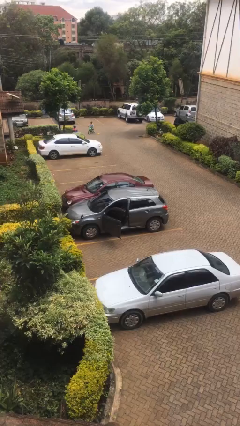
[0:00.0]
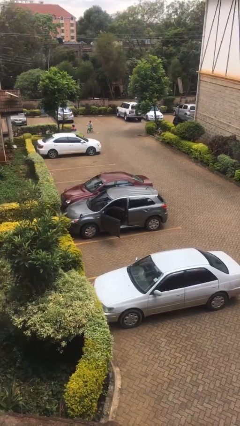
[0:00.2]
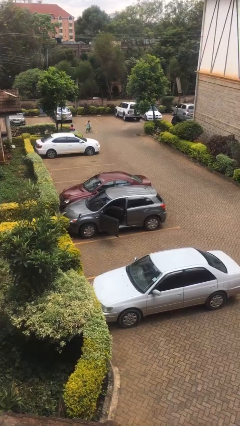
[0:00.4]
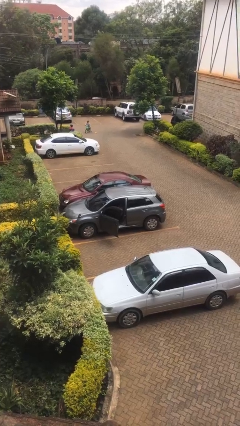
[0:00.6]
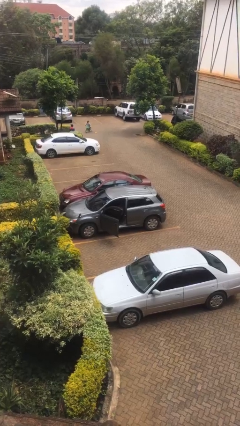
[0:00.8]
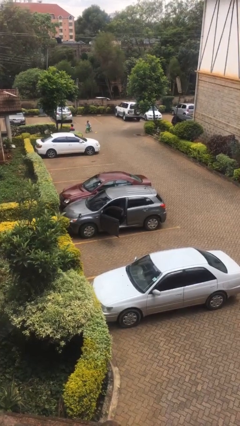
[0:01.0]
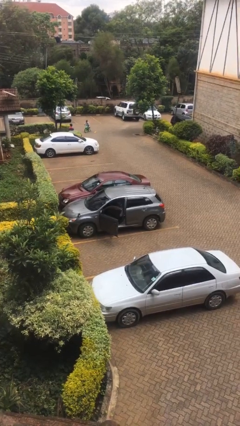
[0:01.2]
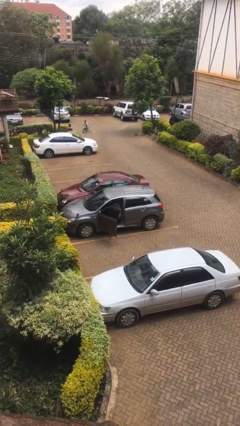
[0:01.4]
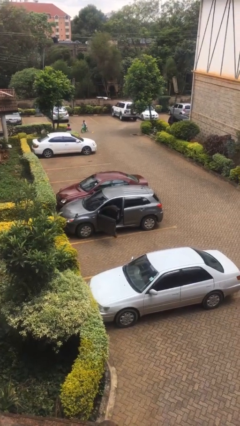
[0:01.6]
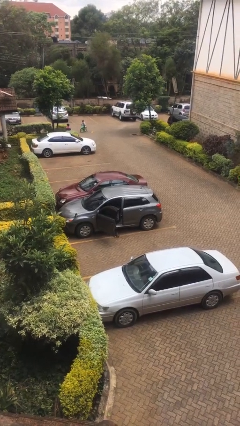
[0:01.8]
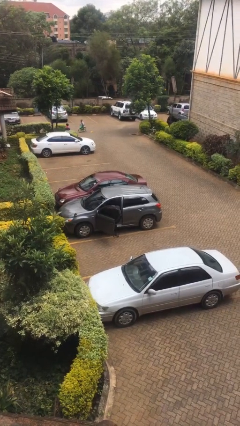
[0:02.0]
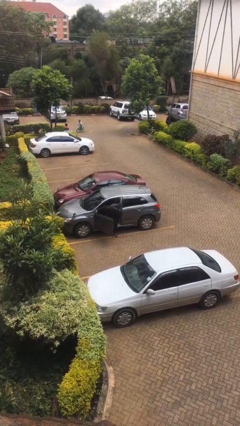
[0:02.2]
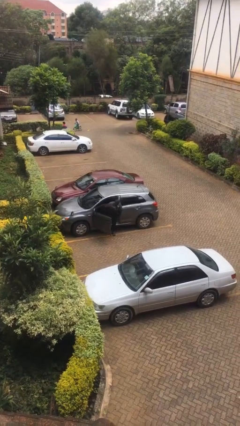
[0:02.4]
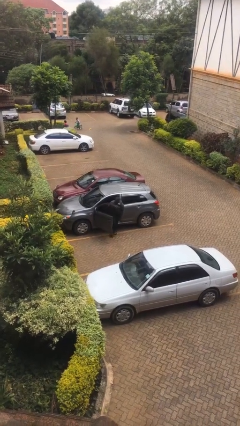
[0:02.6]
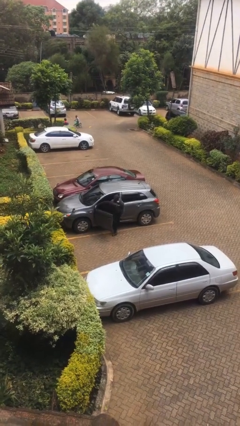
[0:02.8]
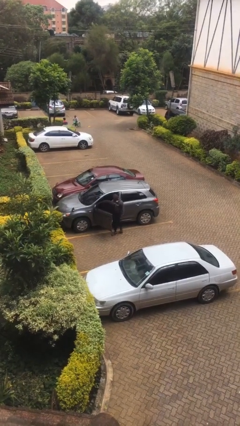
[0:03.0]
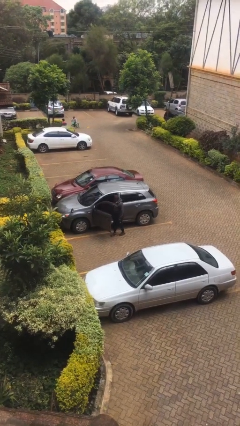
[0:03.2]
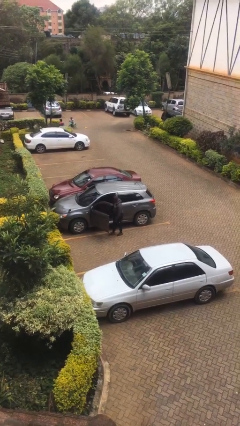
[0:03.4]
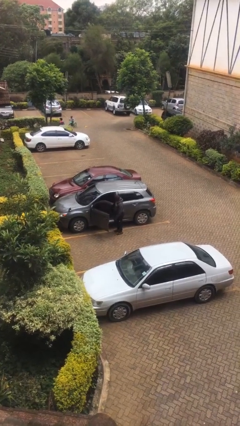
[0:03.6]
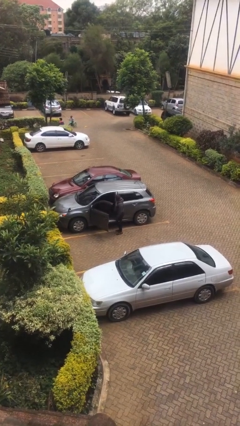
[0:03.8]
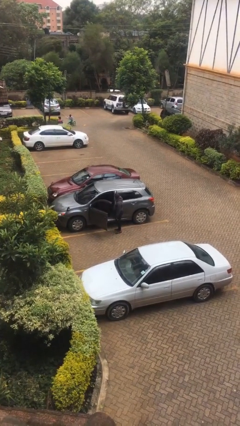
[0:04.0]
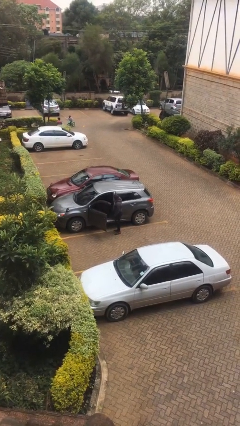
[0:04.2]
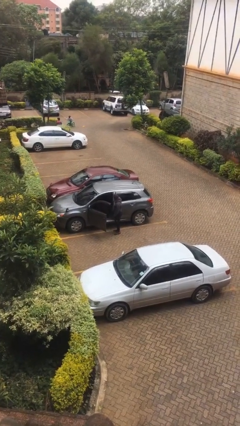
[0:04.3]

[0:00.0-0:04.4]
person exits car

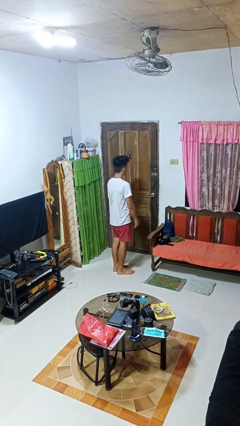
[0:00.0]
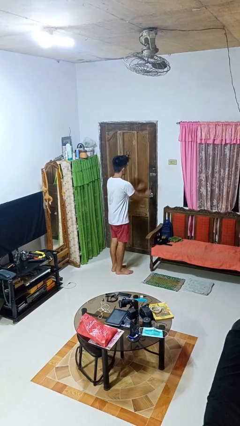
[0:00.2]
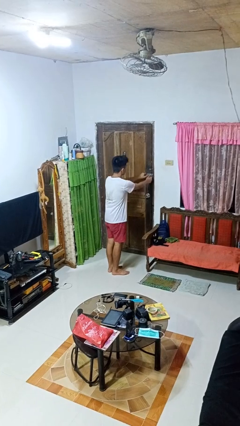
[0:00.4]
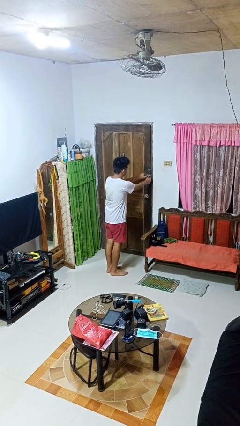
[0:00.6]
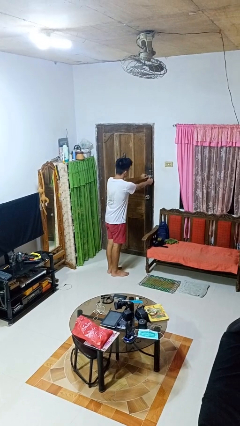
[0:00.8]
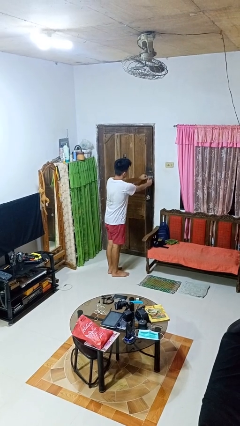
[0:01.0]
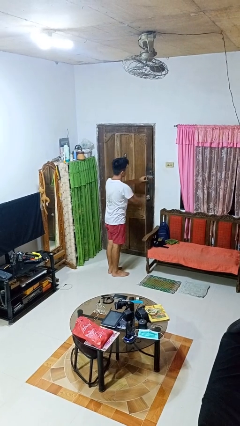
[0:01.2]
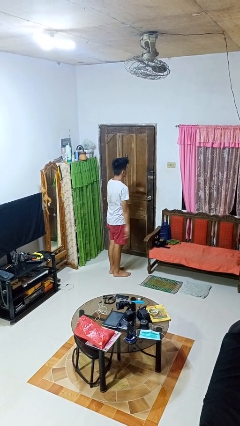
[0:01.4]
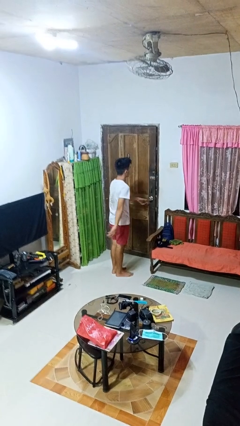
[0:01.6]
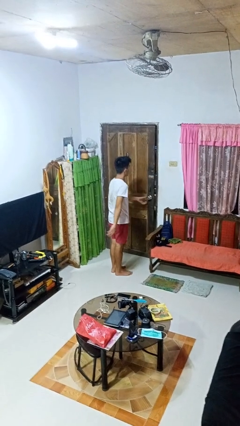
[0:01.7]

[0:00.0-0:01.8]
person unlocks door with keys

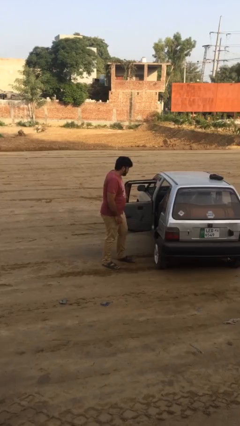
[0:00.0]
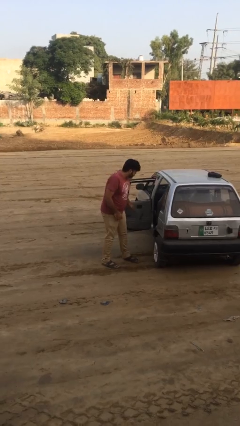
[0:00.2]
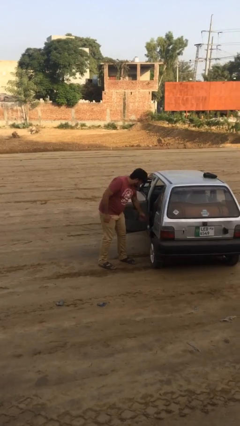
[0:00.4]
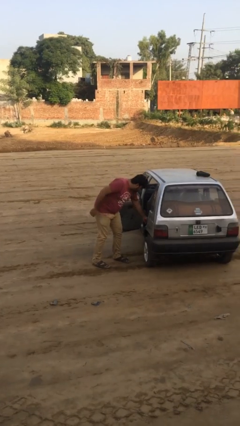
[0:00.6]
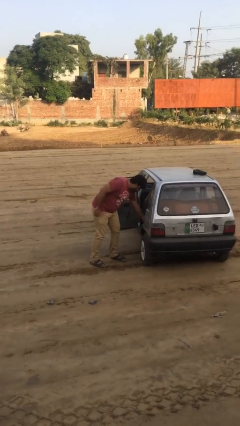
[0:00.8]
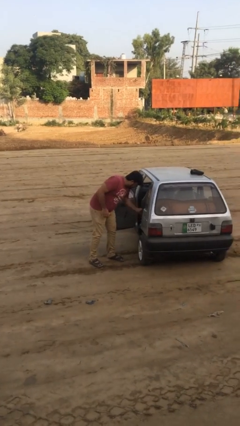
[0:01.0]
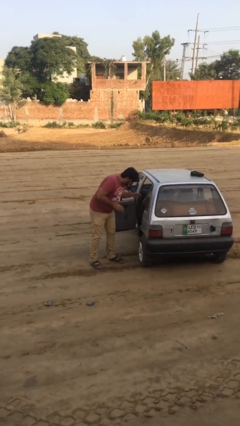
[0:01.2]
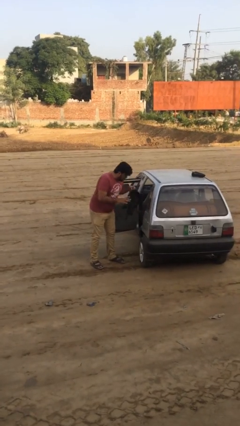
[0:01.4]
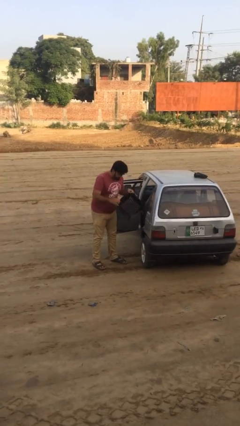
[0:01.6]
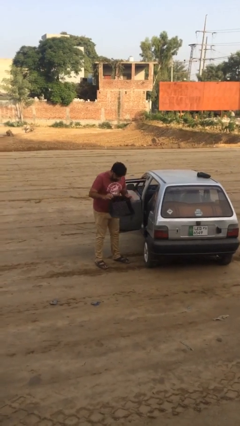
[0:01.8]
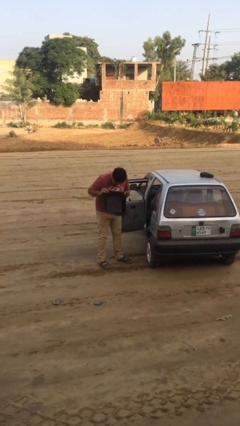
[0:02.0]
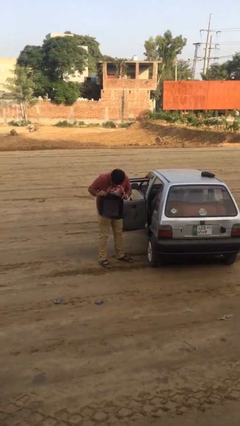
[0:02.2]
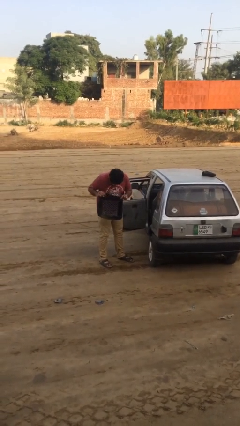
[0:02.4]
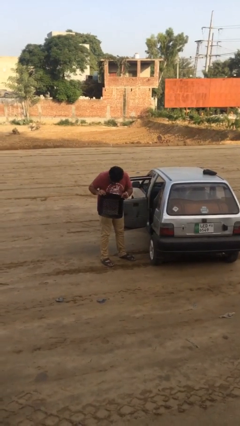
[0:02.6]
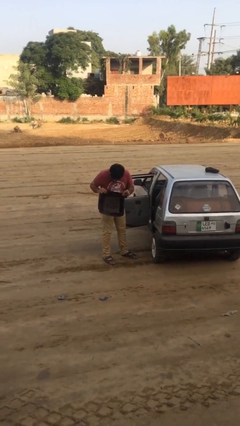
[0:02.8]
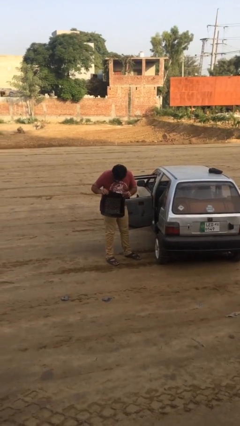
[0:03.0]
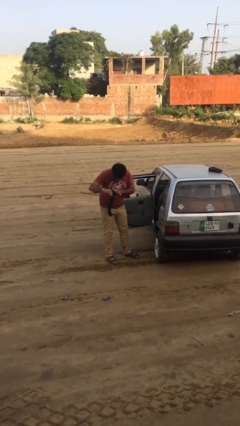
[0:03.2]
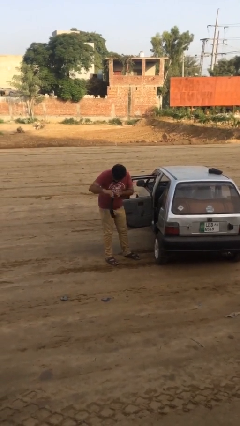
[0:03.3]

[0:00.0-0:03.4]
person unloads car

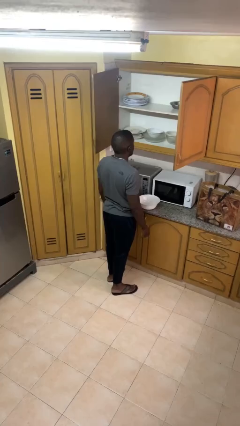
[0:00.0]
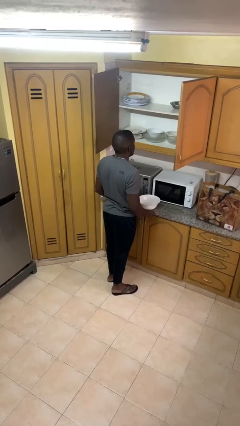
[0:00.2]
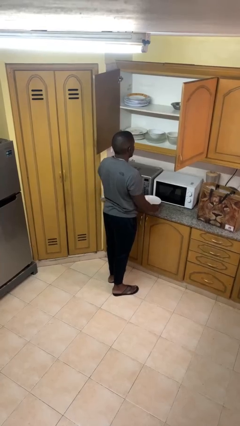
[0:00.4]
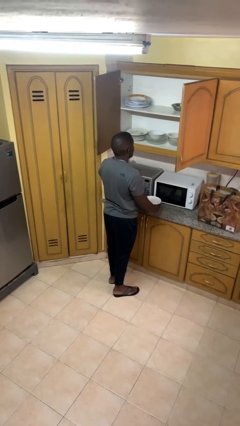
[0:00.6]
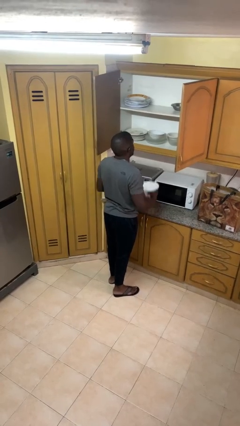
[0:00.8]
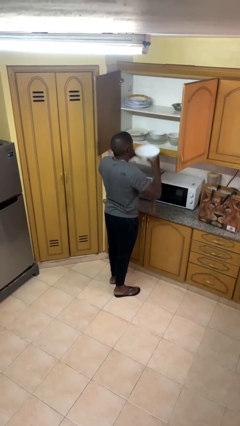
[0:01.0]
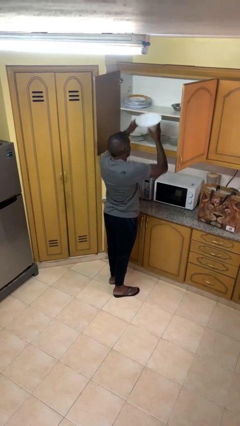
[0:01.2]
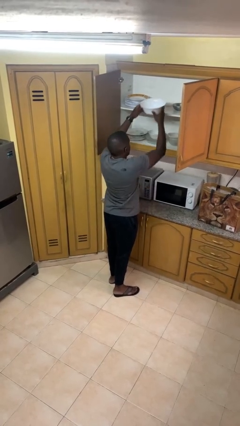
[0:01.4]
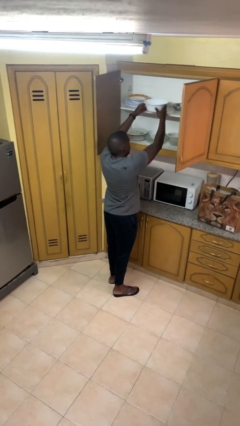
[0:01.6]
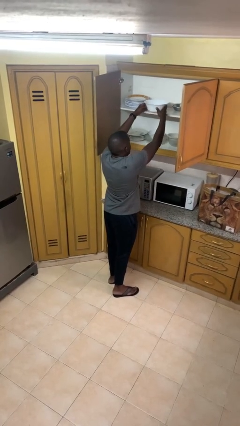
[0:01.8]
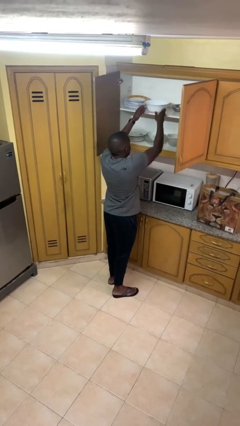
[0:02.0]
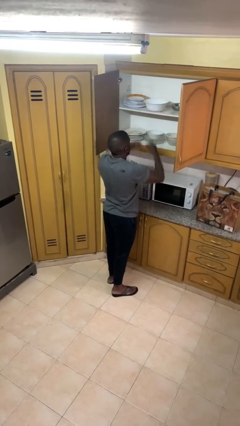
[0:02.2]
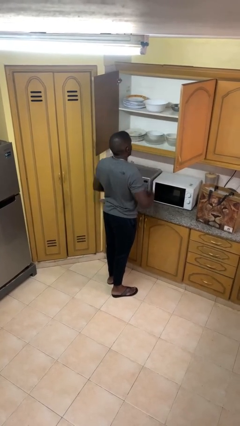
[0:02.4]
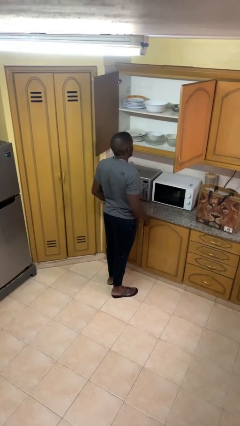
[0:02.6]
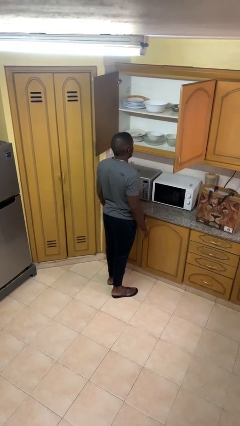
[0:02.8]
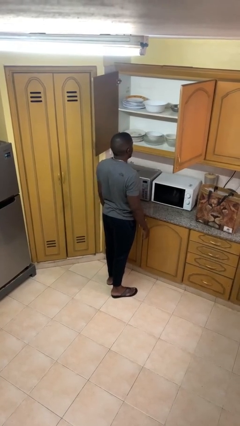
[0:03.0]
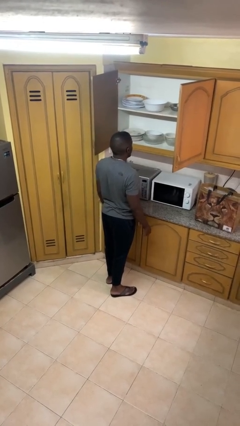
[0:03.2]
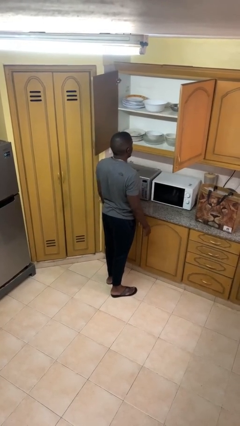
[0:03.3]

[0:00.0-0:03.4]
person puts object in cabinet

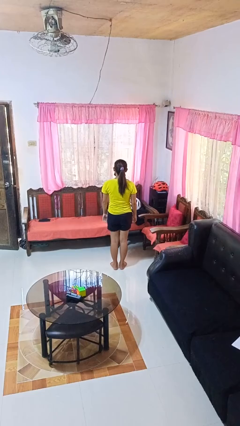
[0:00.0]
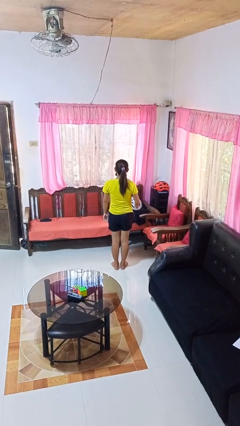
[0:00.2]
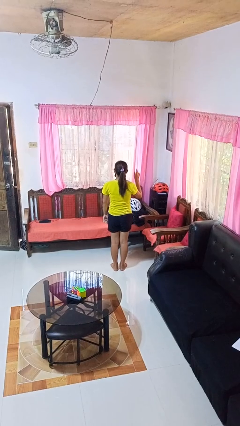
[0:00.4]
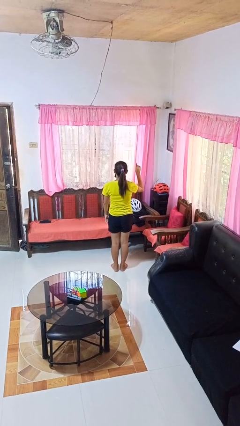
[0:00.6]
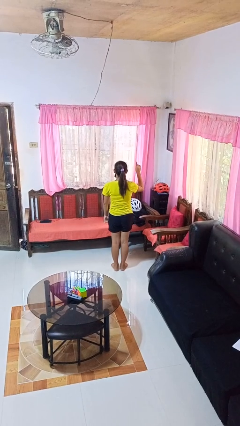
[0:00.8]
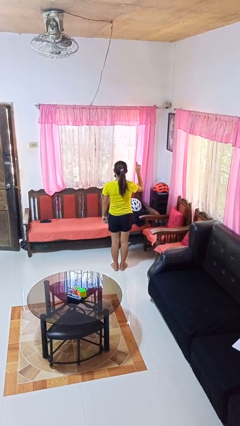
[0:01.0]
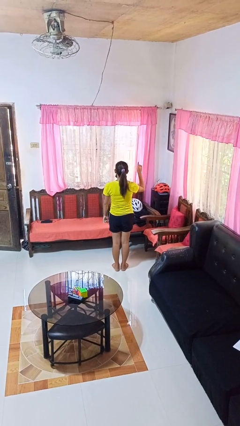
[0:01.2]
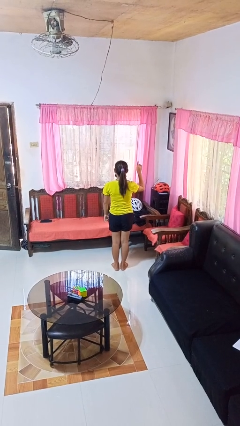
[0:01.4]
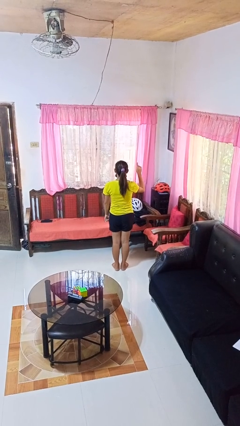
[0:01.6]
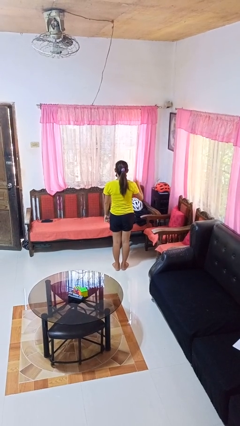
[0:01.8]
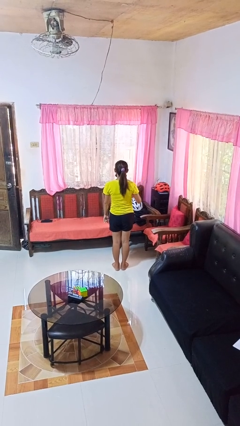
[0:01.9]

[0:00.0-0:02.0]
person gestures number one

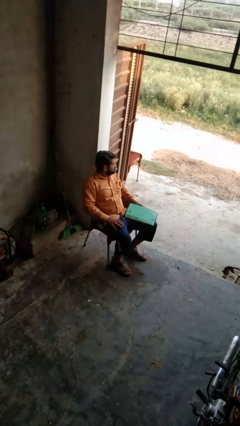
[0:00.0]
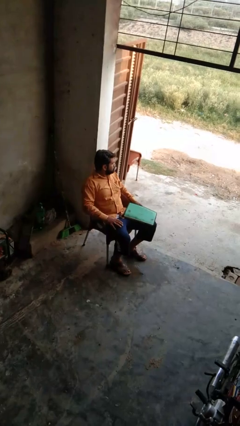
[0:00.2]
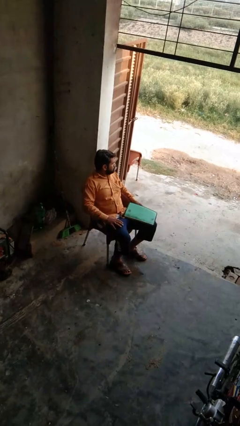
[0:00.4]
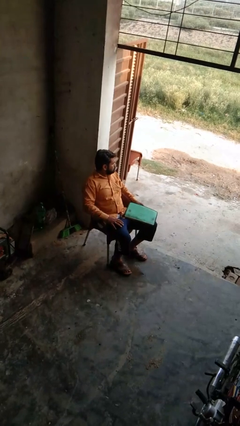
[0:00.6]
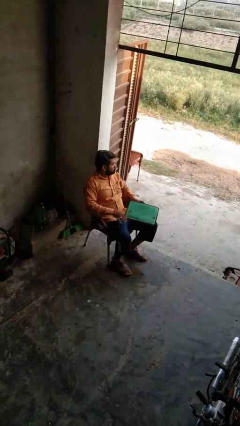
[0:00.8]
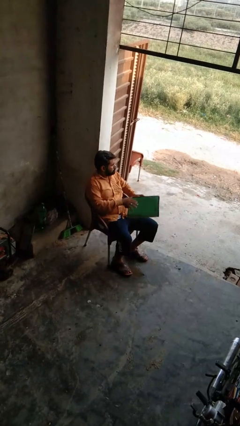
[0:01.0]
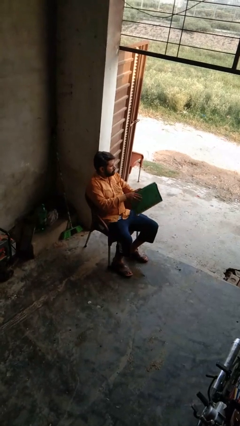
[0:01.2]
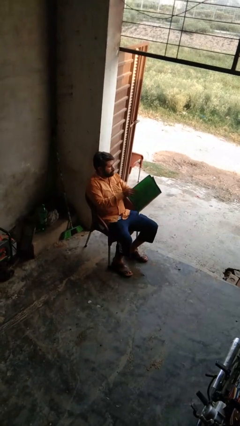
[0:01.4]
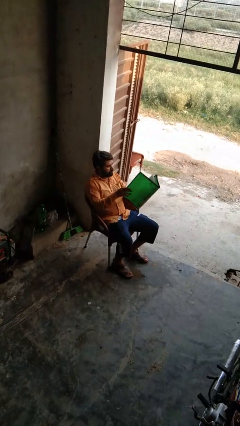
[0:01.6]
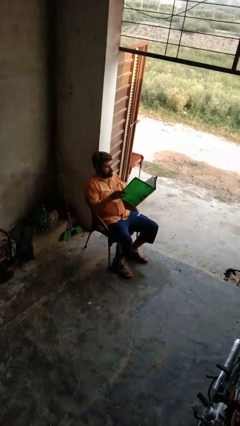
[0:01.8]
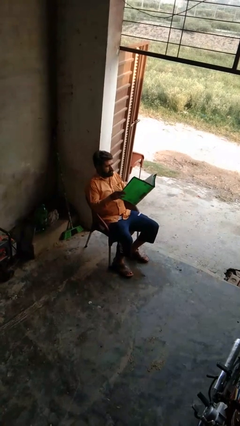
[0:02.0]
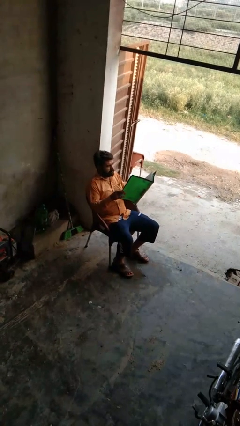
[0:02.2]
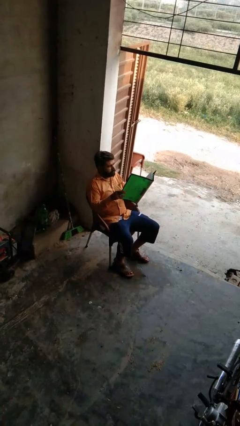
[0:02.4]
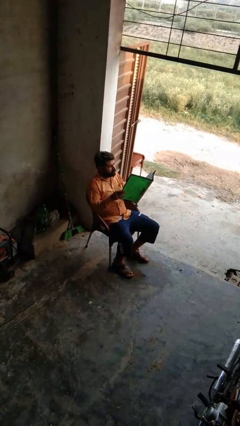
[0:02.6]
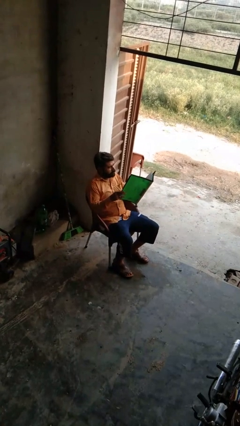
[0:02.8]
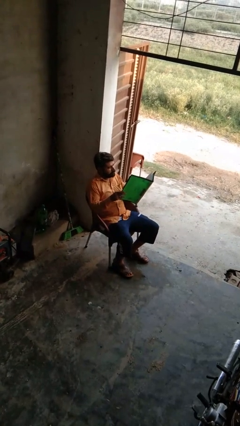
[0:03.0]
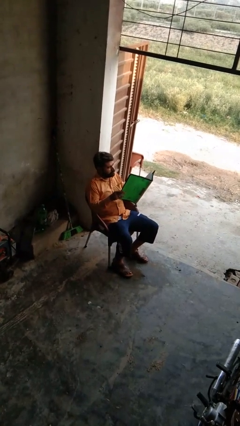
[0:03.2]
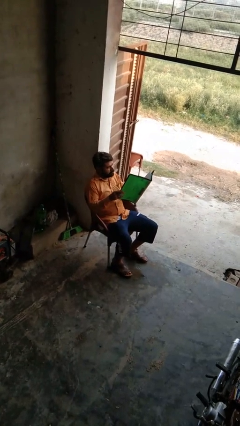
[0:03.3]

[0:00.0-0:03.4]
person reads magazine
